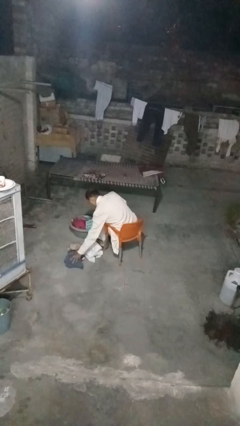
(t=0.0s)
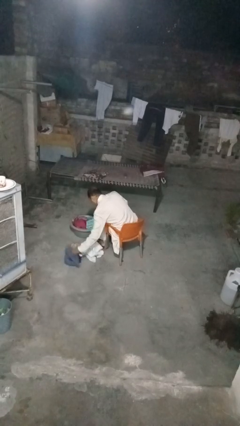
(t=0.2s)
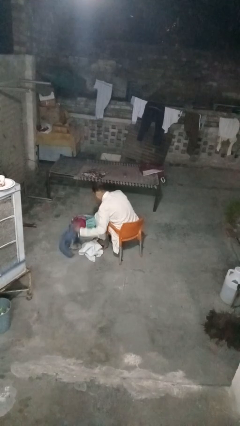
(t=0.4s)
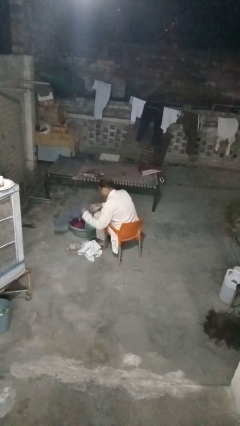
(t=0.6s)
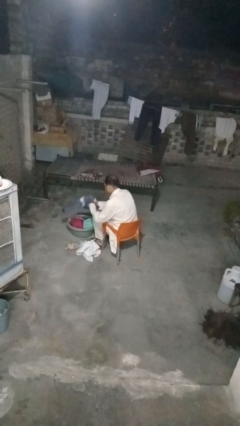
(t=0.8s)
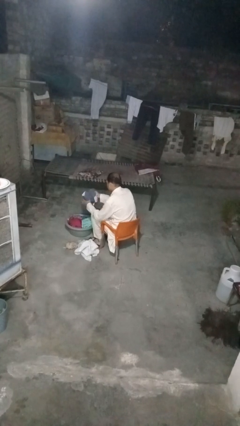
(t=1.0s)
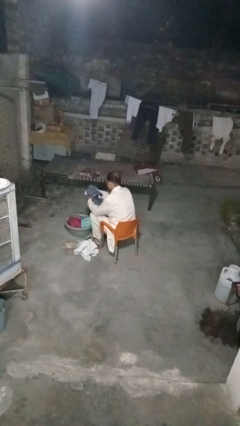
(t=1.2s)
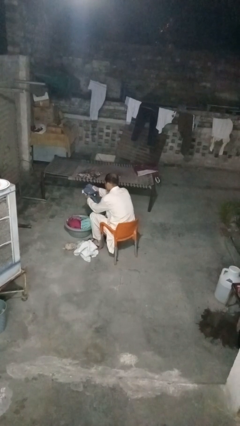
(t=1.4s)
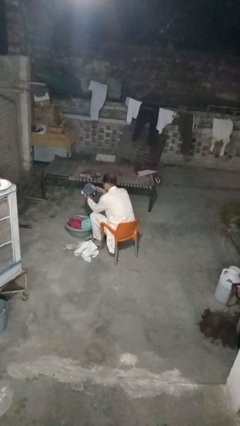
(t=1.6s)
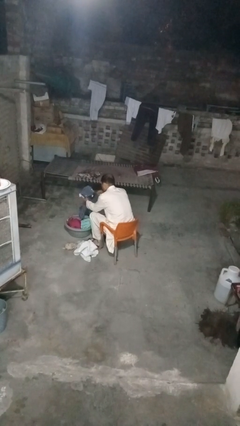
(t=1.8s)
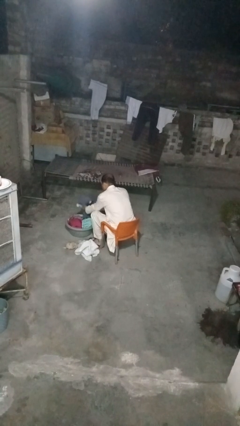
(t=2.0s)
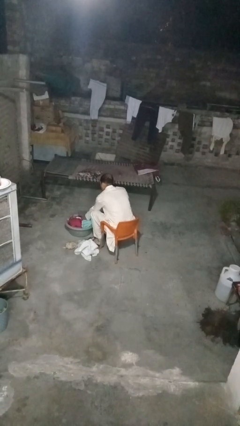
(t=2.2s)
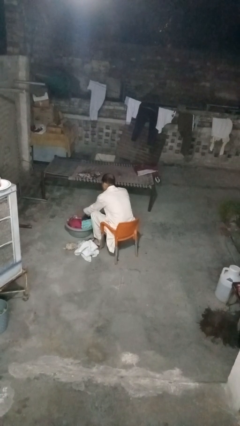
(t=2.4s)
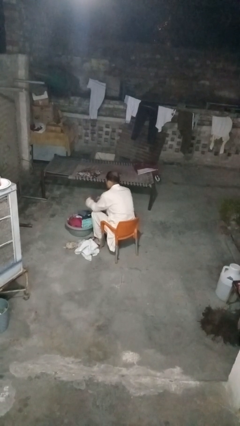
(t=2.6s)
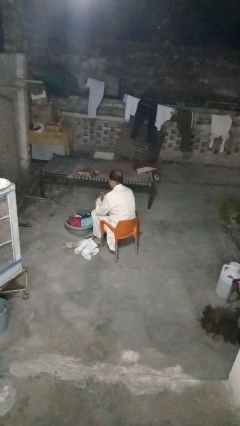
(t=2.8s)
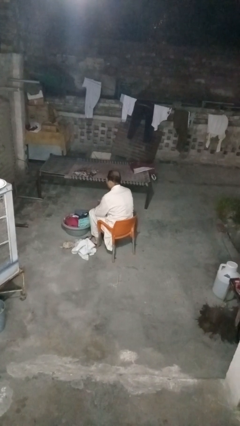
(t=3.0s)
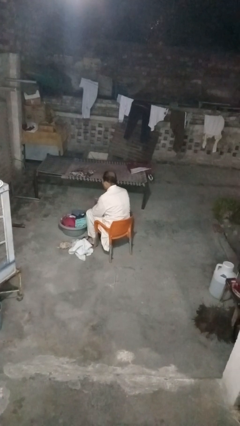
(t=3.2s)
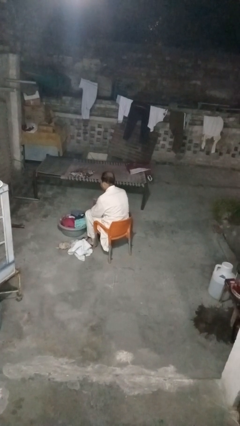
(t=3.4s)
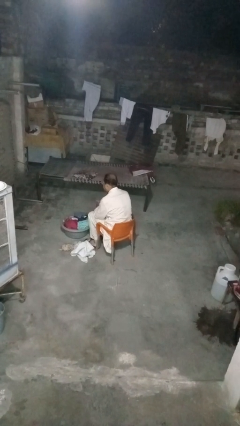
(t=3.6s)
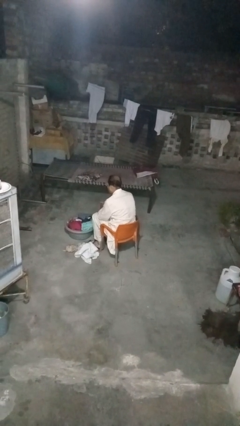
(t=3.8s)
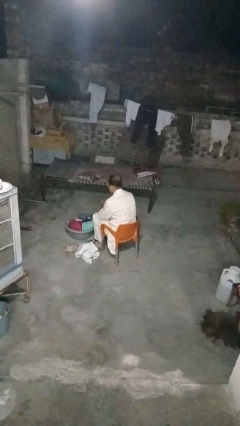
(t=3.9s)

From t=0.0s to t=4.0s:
person puts object into basket

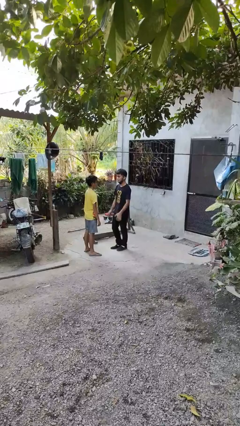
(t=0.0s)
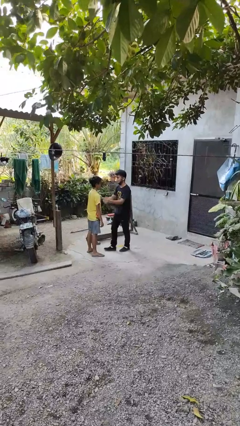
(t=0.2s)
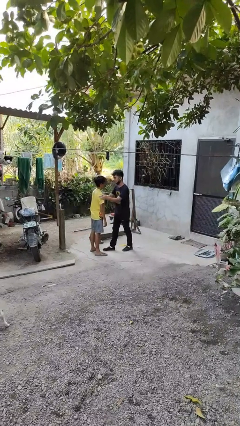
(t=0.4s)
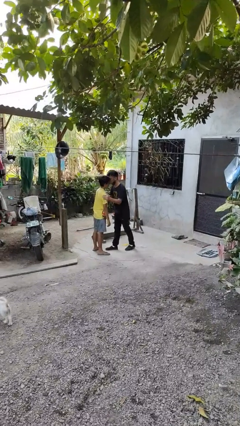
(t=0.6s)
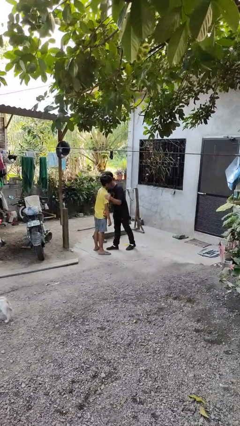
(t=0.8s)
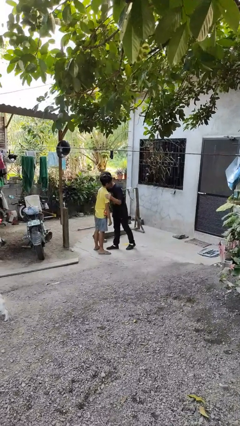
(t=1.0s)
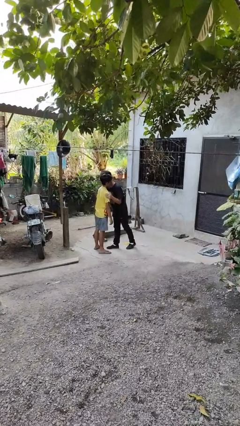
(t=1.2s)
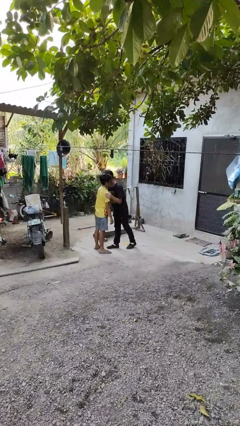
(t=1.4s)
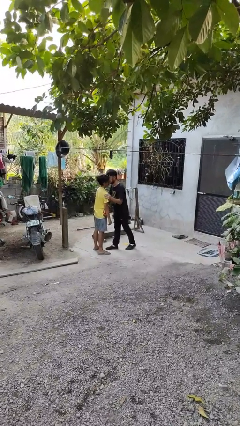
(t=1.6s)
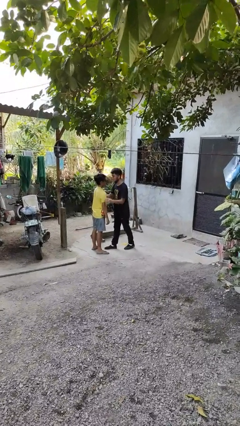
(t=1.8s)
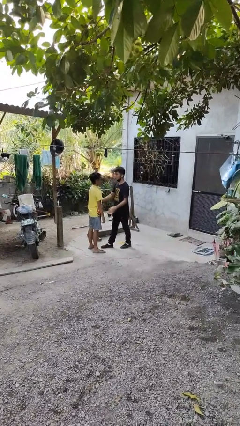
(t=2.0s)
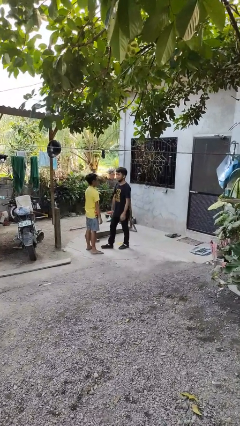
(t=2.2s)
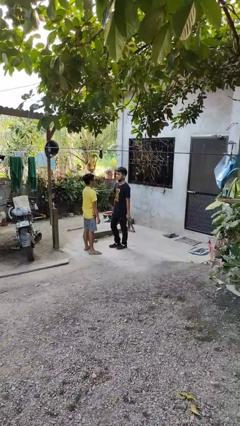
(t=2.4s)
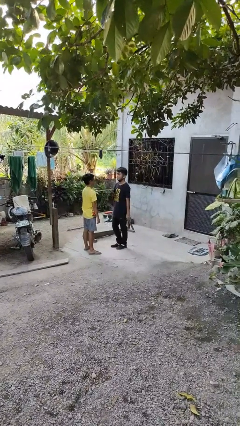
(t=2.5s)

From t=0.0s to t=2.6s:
person kisses cheek of person

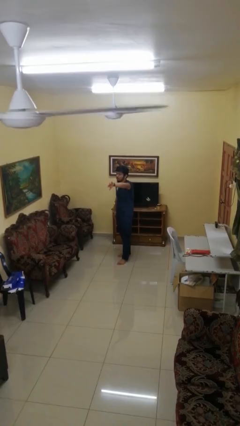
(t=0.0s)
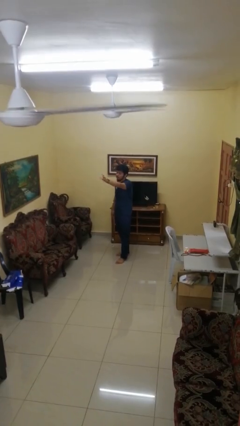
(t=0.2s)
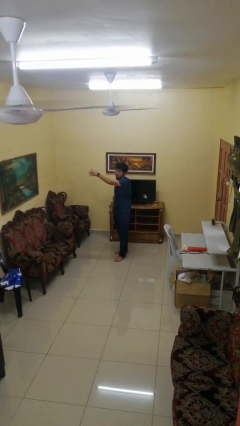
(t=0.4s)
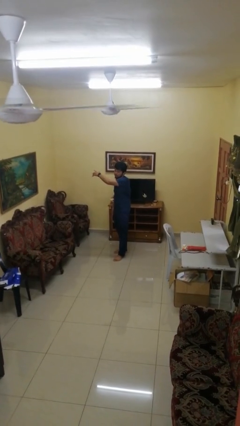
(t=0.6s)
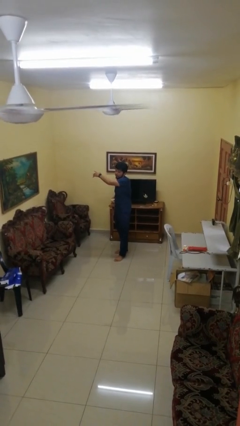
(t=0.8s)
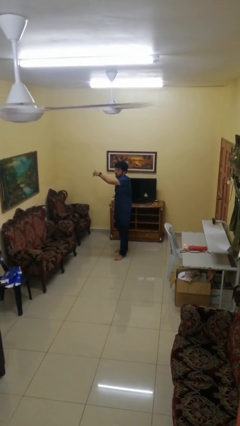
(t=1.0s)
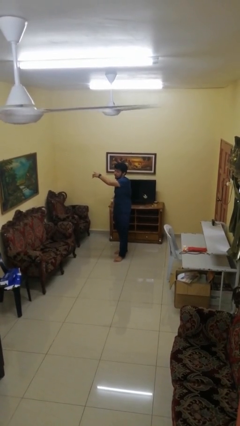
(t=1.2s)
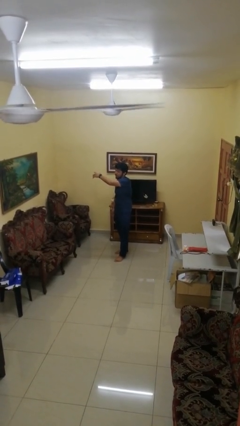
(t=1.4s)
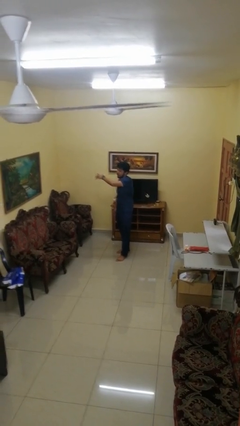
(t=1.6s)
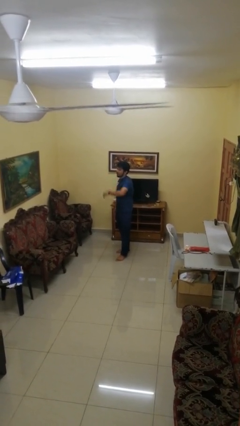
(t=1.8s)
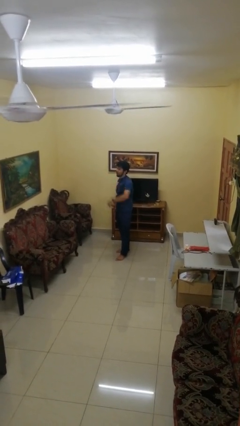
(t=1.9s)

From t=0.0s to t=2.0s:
person gestures swipe right

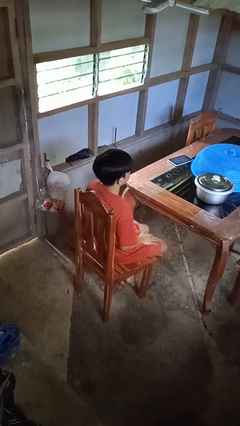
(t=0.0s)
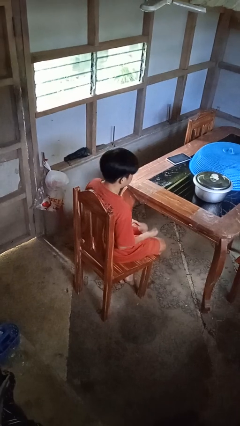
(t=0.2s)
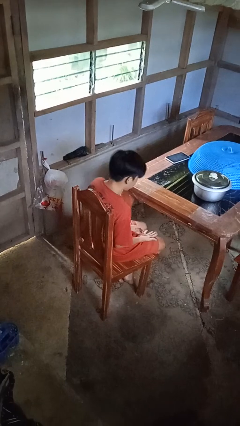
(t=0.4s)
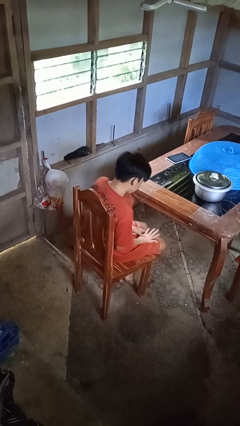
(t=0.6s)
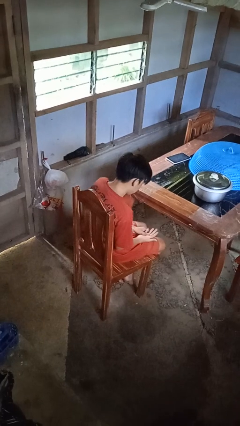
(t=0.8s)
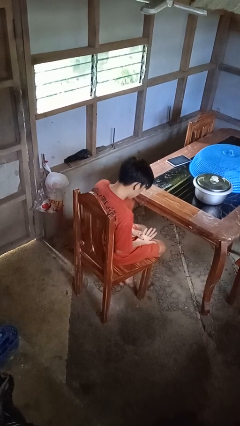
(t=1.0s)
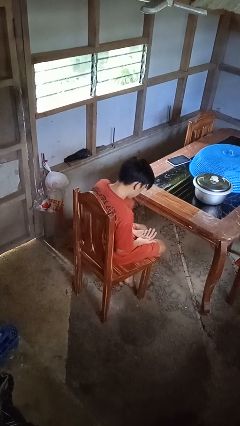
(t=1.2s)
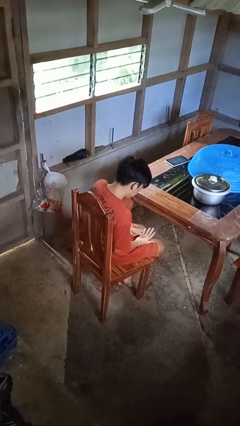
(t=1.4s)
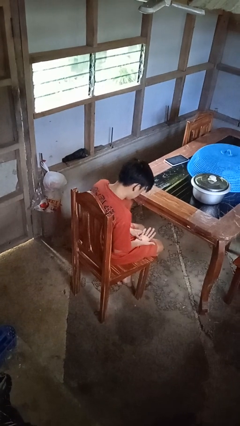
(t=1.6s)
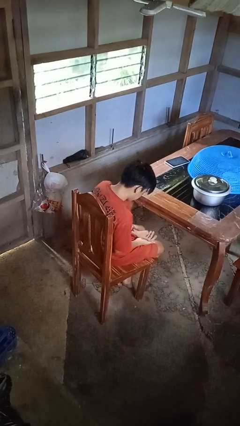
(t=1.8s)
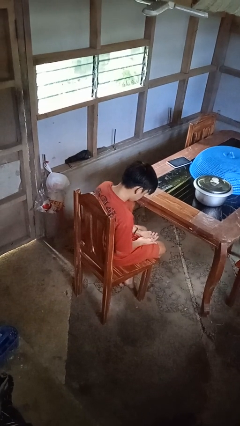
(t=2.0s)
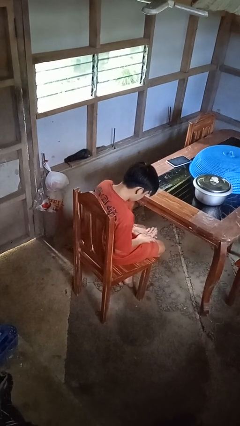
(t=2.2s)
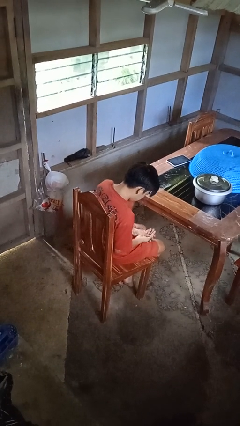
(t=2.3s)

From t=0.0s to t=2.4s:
person looks at hands in lap

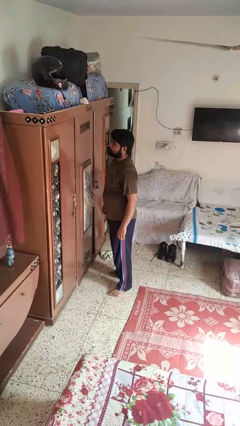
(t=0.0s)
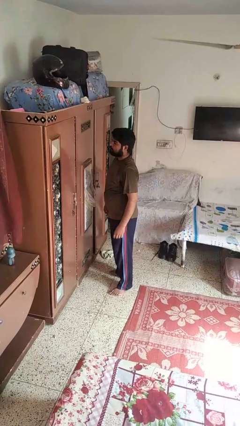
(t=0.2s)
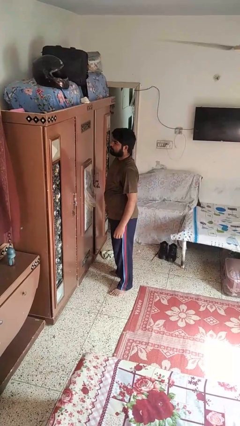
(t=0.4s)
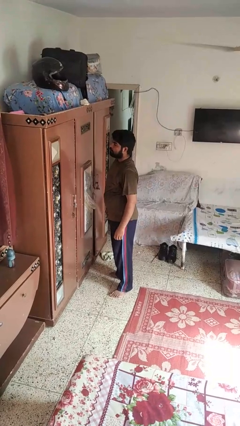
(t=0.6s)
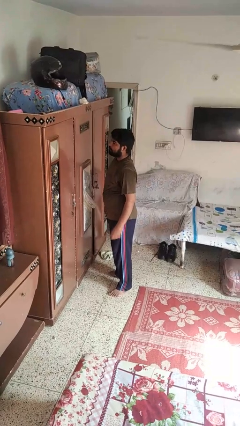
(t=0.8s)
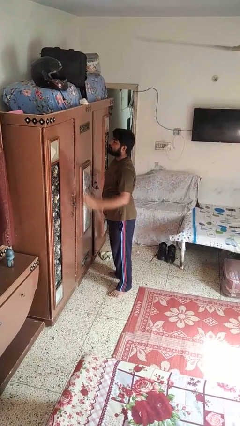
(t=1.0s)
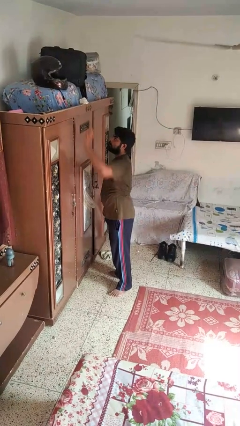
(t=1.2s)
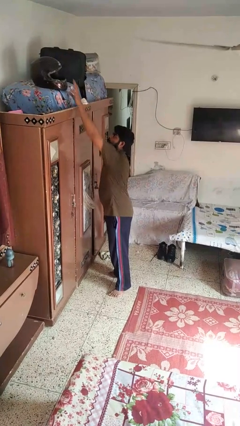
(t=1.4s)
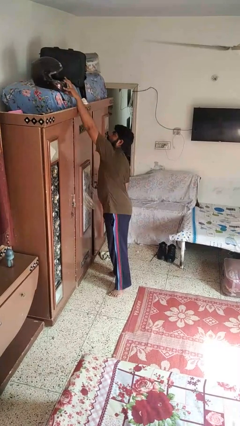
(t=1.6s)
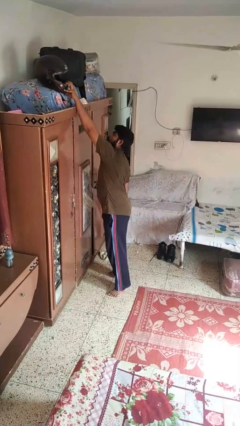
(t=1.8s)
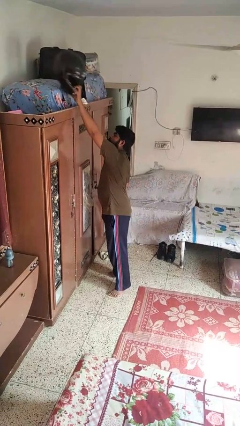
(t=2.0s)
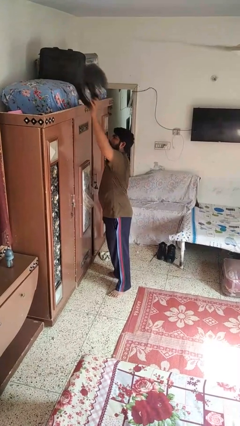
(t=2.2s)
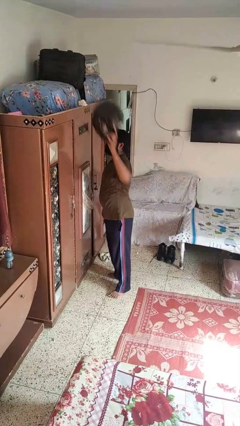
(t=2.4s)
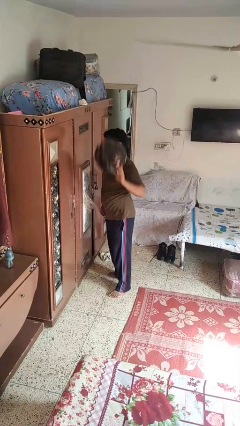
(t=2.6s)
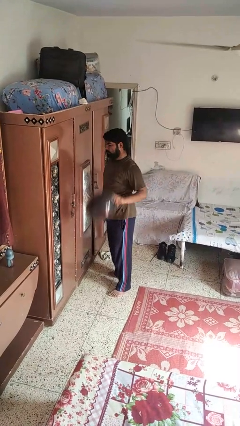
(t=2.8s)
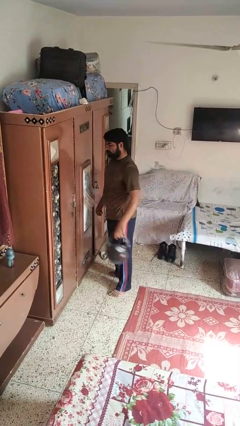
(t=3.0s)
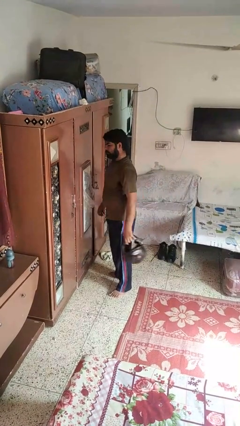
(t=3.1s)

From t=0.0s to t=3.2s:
person picks up object from shelf

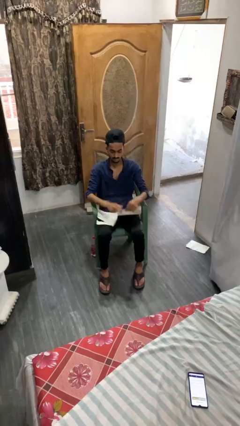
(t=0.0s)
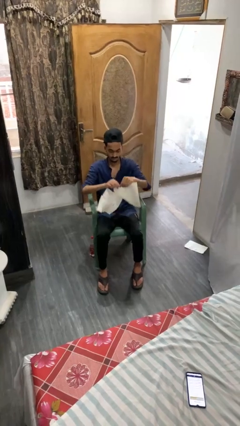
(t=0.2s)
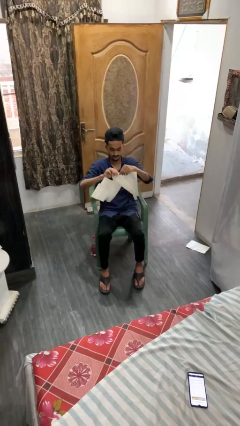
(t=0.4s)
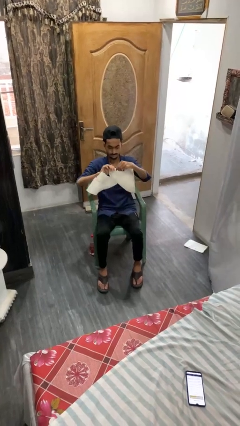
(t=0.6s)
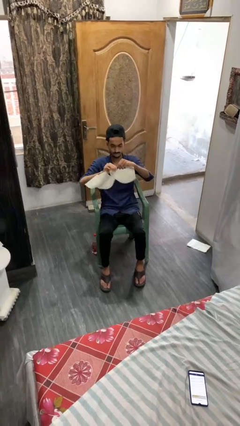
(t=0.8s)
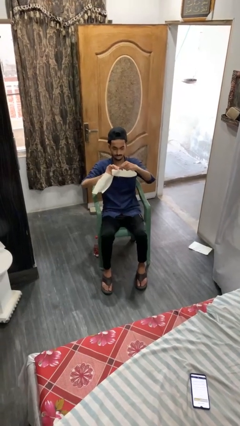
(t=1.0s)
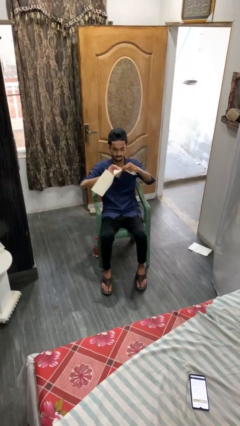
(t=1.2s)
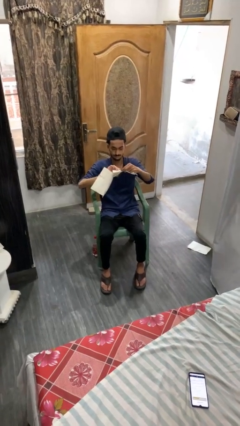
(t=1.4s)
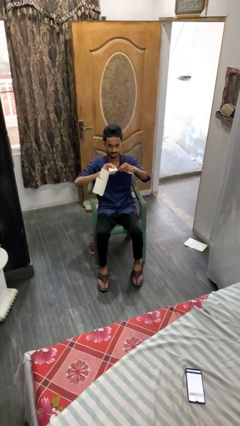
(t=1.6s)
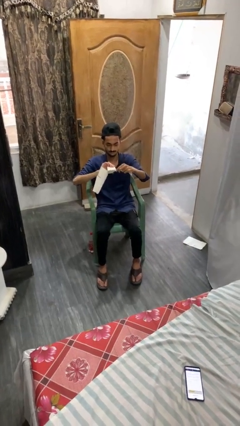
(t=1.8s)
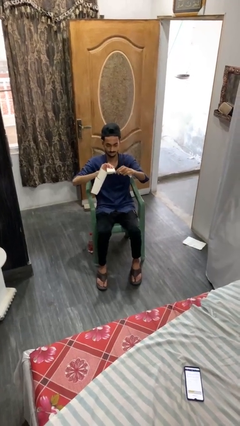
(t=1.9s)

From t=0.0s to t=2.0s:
person tears paper

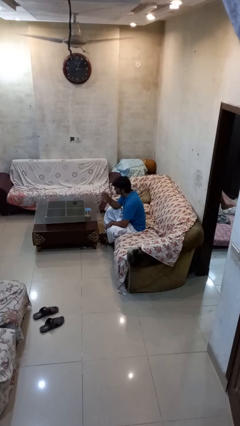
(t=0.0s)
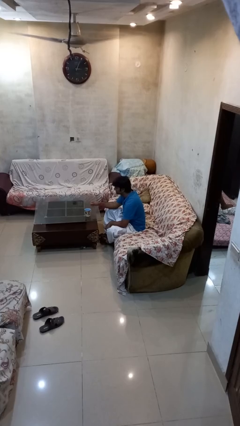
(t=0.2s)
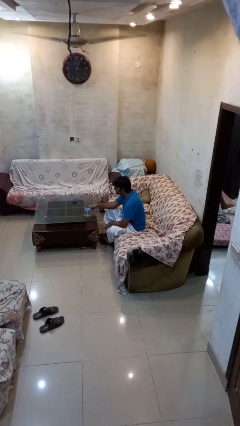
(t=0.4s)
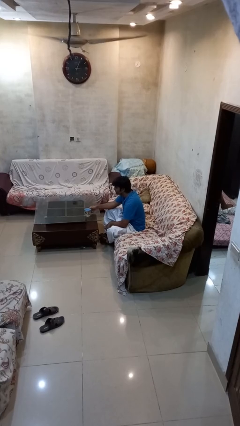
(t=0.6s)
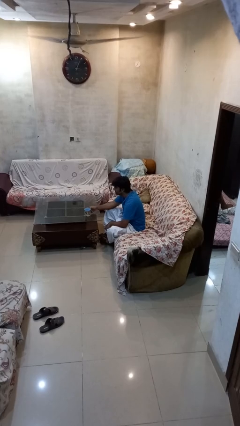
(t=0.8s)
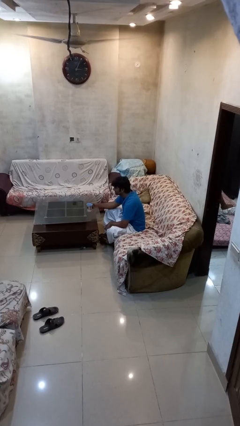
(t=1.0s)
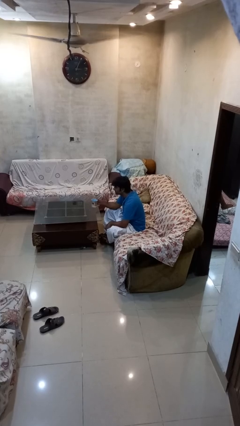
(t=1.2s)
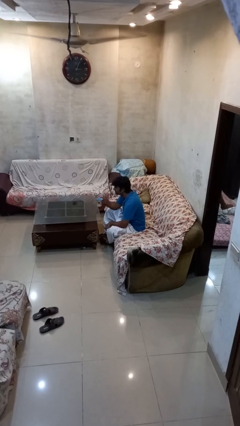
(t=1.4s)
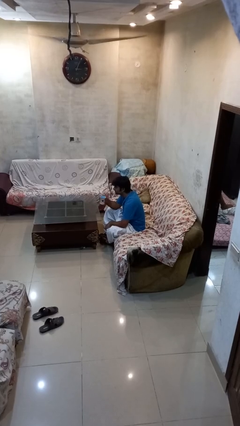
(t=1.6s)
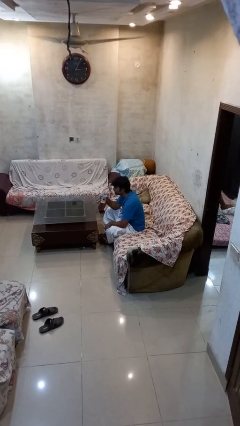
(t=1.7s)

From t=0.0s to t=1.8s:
person picks up object from table
